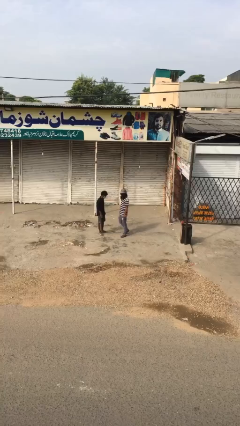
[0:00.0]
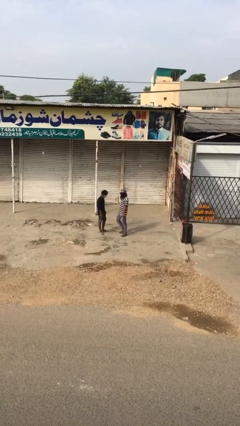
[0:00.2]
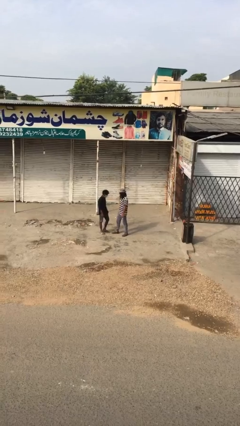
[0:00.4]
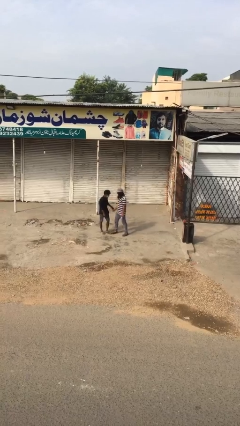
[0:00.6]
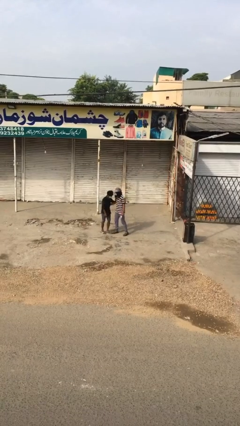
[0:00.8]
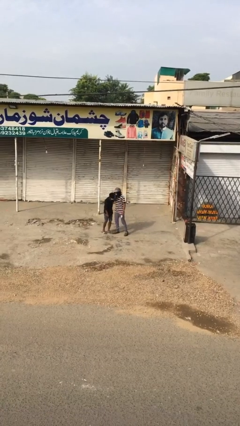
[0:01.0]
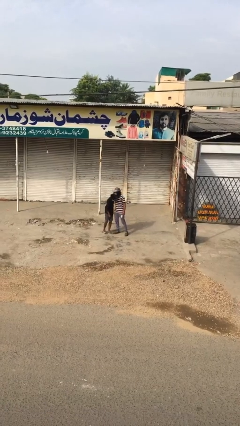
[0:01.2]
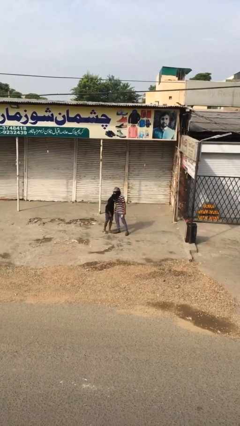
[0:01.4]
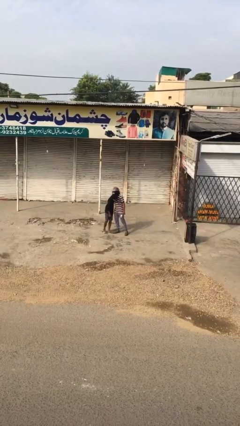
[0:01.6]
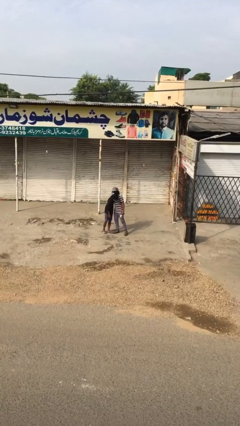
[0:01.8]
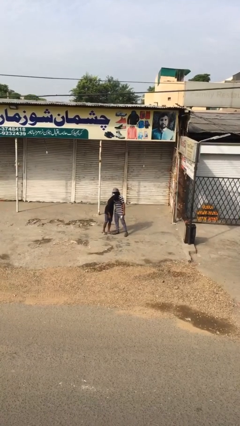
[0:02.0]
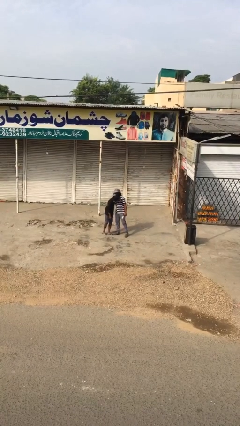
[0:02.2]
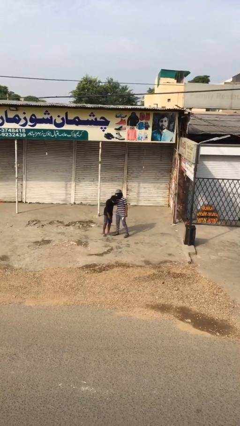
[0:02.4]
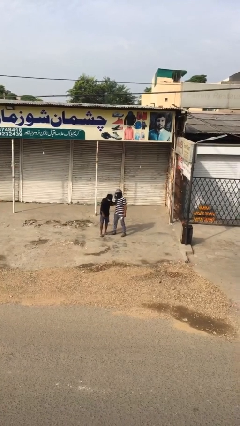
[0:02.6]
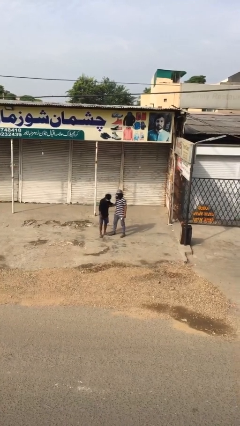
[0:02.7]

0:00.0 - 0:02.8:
person embraces person

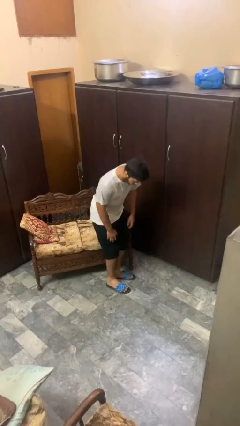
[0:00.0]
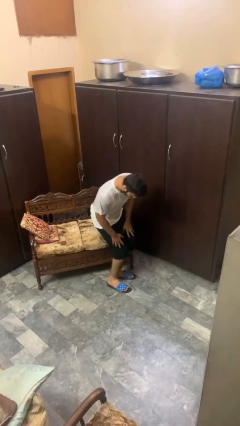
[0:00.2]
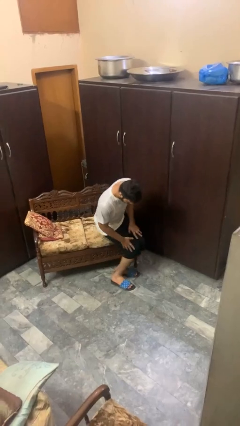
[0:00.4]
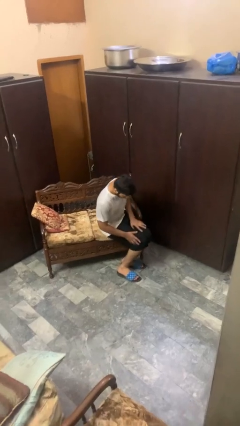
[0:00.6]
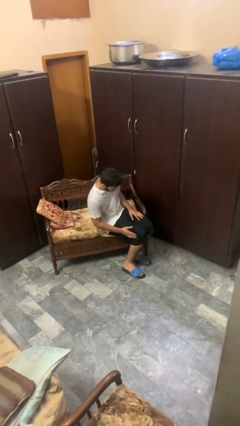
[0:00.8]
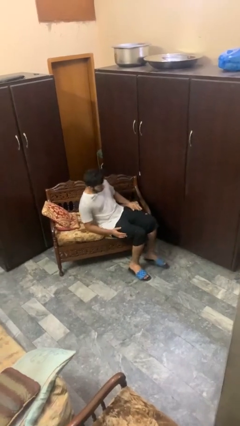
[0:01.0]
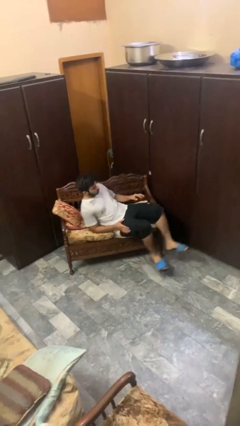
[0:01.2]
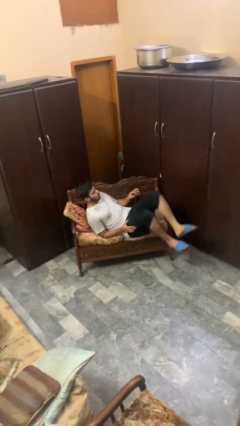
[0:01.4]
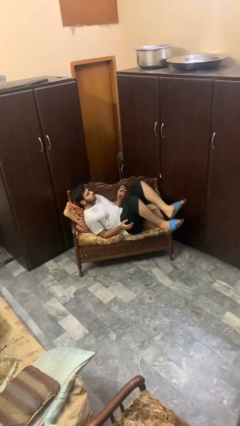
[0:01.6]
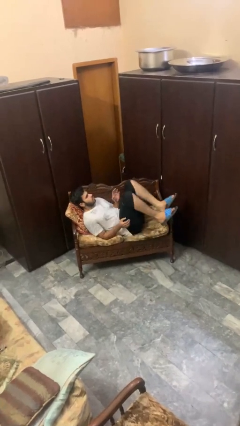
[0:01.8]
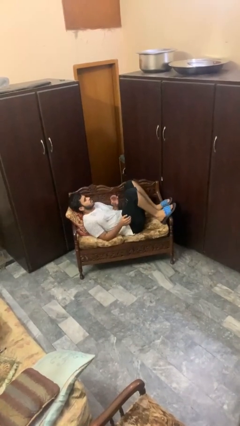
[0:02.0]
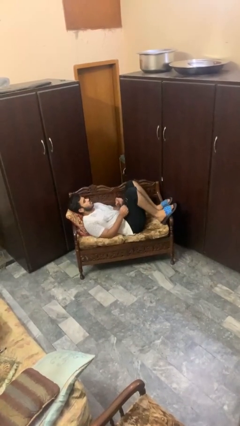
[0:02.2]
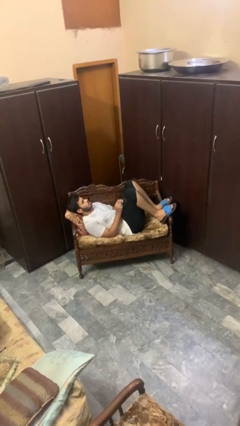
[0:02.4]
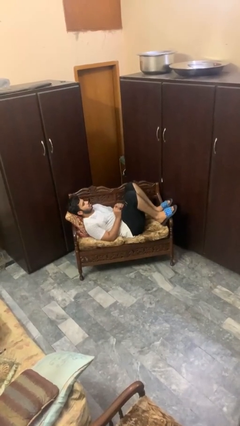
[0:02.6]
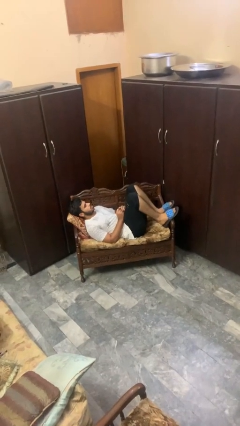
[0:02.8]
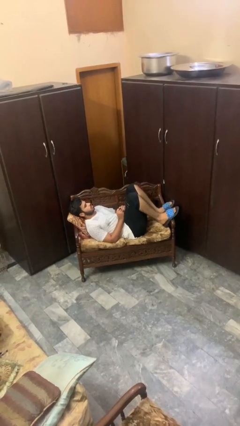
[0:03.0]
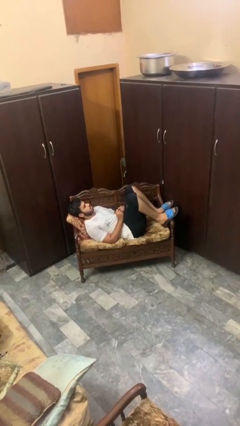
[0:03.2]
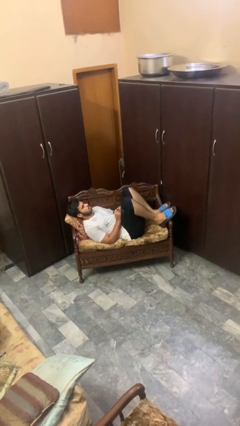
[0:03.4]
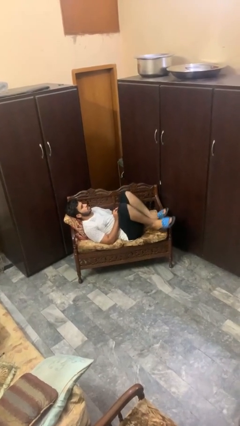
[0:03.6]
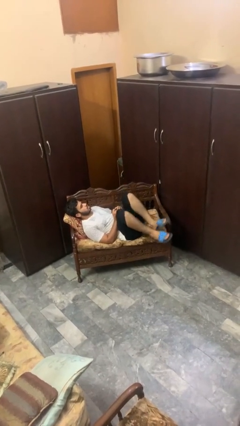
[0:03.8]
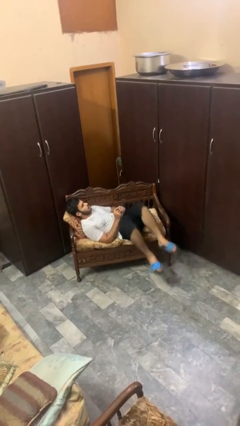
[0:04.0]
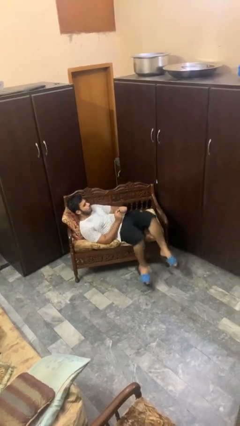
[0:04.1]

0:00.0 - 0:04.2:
person lies down on couch

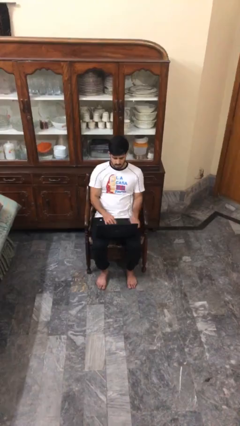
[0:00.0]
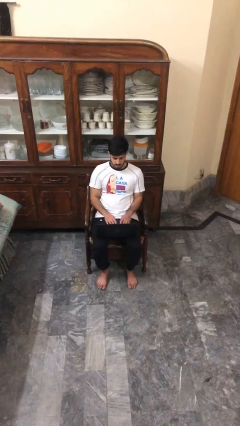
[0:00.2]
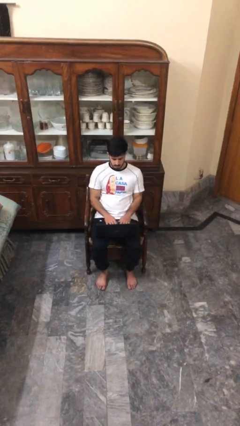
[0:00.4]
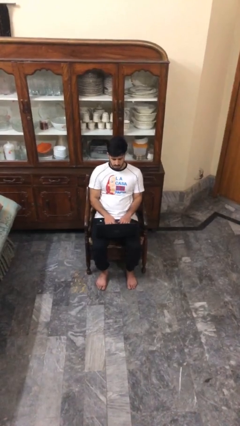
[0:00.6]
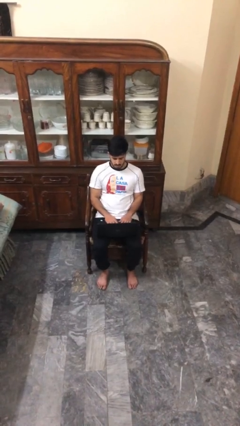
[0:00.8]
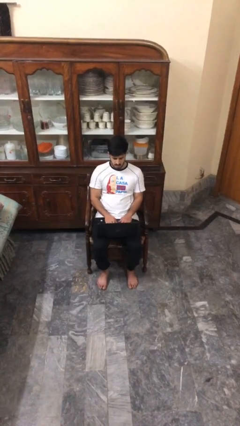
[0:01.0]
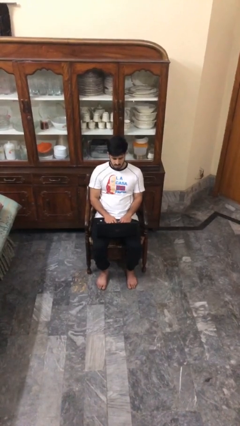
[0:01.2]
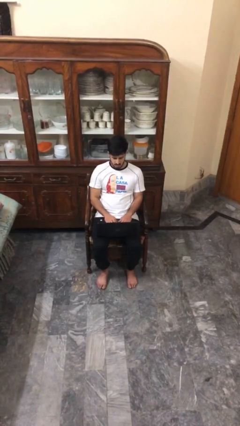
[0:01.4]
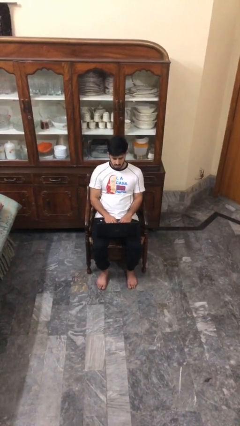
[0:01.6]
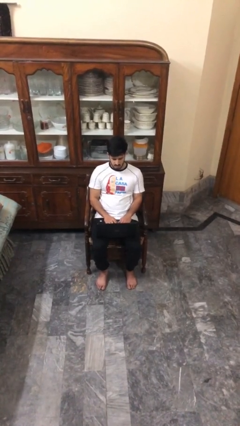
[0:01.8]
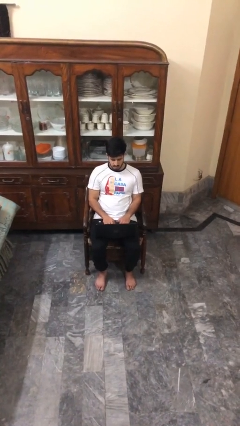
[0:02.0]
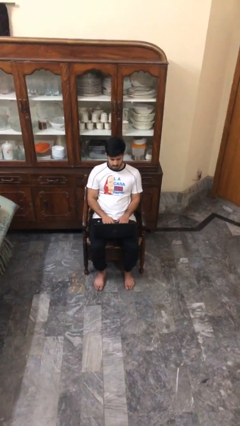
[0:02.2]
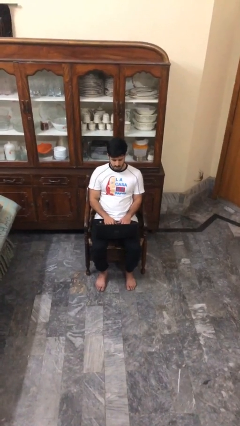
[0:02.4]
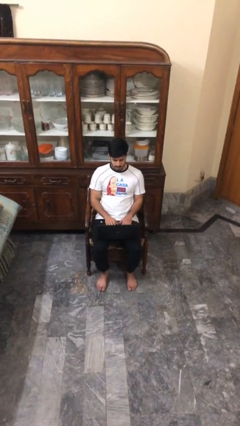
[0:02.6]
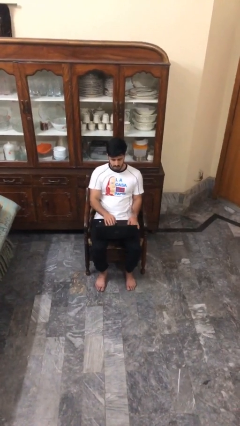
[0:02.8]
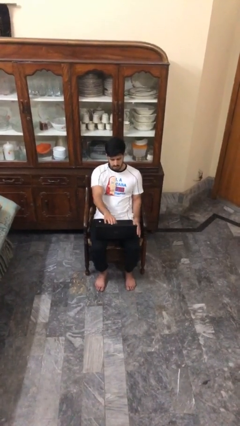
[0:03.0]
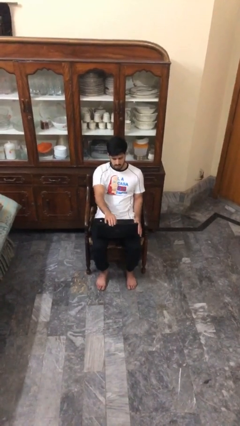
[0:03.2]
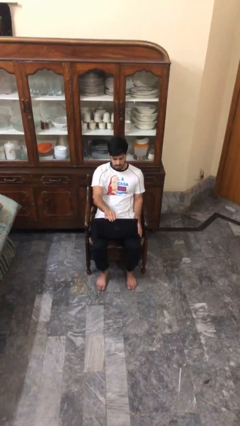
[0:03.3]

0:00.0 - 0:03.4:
person interacts with laptop

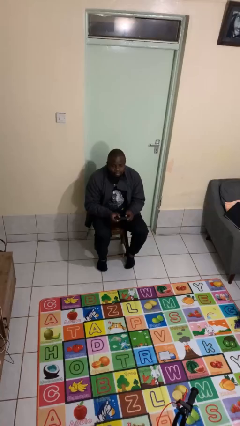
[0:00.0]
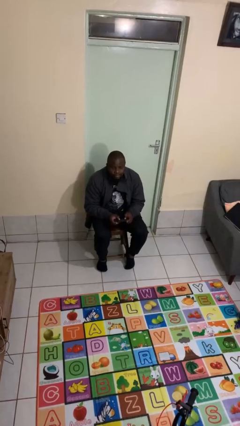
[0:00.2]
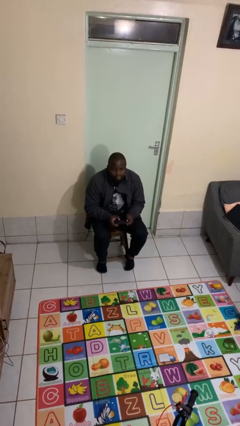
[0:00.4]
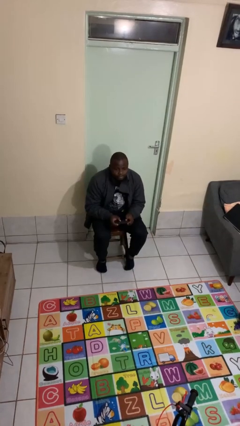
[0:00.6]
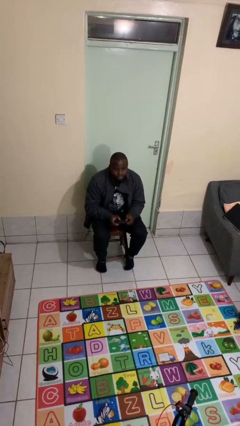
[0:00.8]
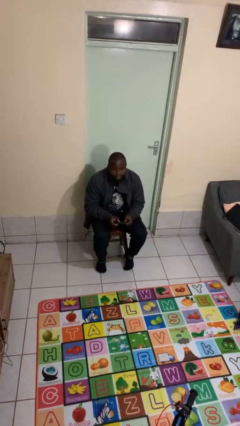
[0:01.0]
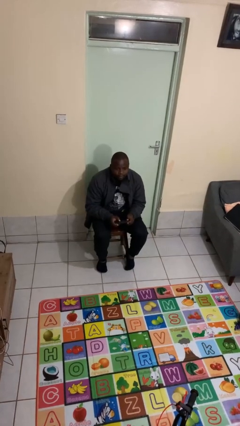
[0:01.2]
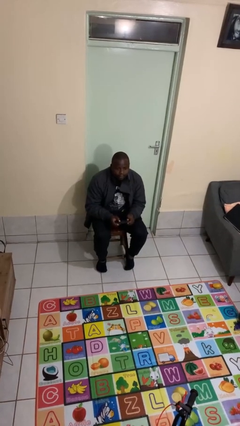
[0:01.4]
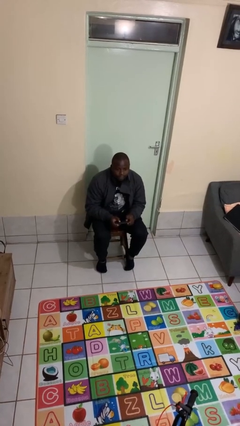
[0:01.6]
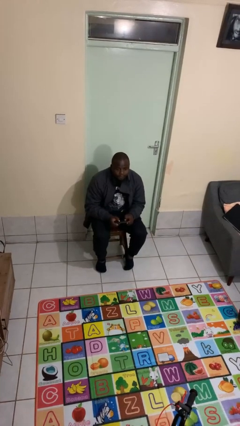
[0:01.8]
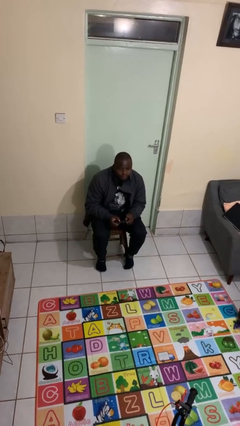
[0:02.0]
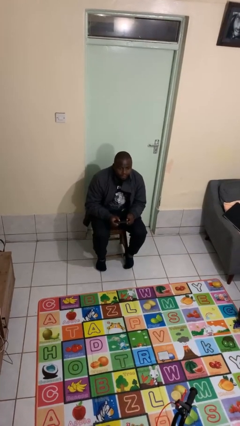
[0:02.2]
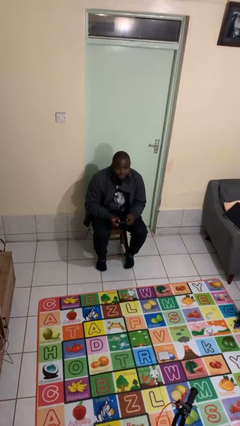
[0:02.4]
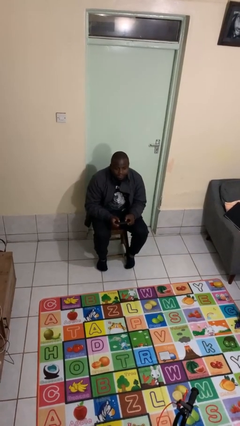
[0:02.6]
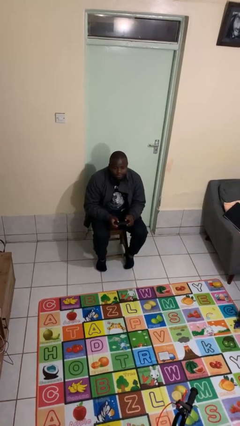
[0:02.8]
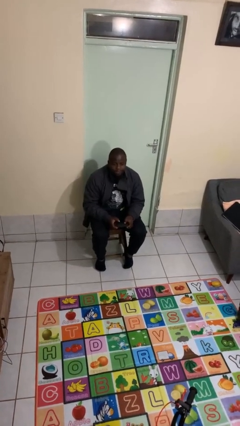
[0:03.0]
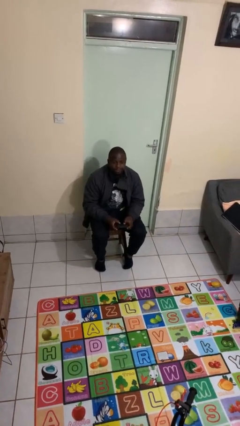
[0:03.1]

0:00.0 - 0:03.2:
person interacts with handheld game

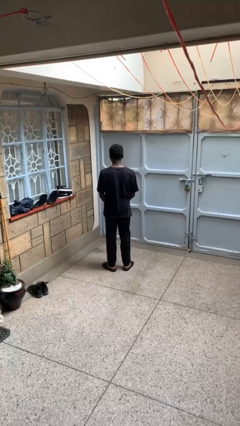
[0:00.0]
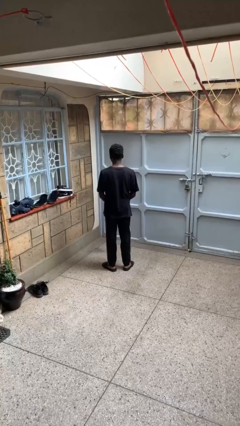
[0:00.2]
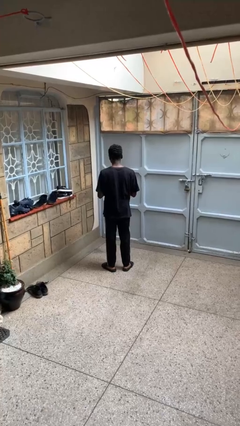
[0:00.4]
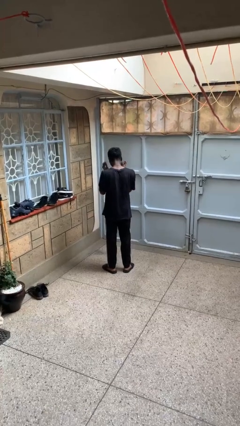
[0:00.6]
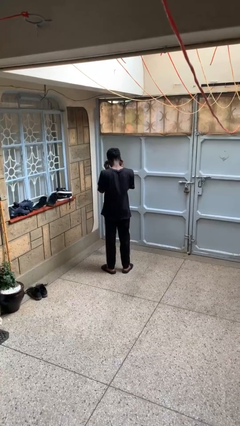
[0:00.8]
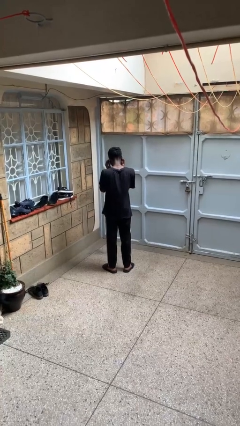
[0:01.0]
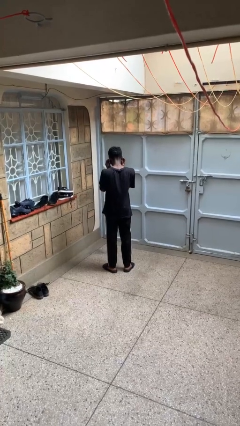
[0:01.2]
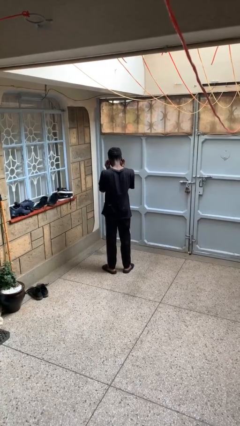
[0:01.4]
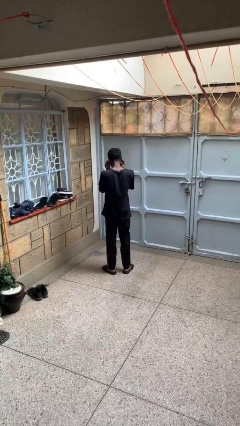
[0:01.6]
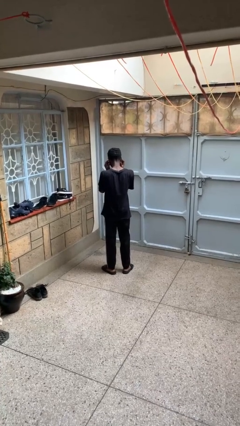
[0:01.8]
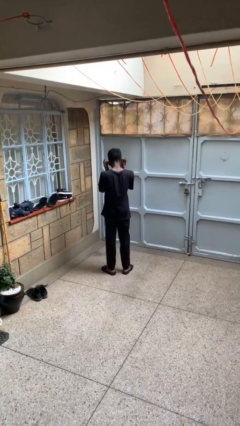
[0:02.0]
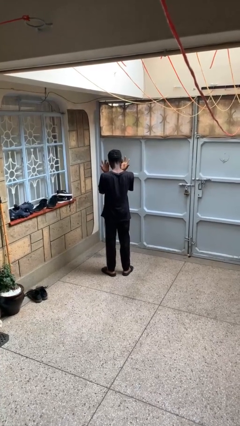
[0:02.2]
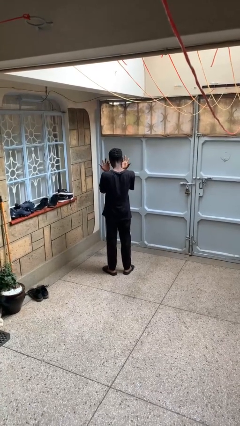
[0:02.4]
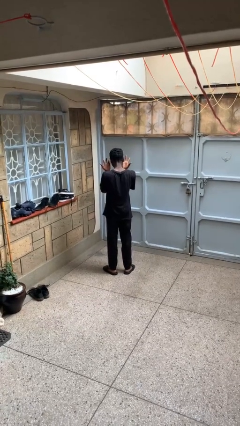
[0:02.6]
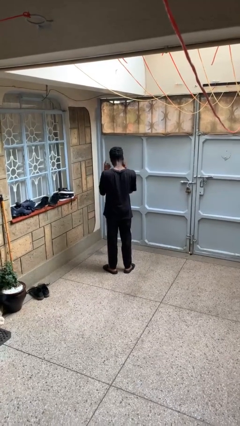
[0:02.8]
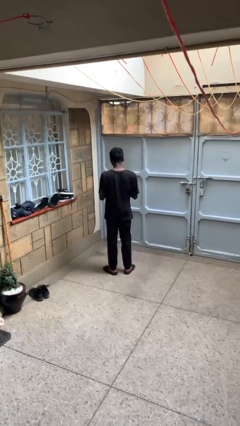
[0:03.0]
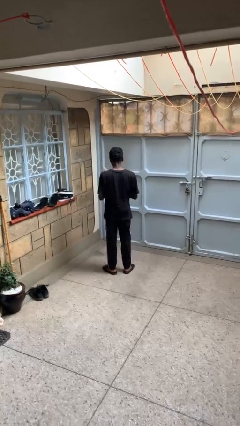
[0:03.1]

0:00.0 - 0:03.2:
person puts fingers in ear

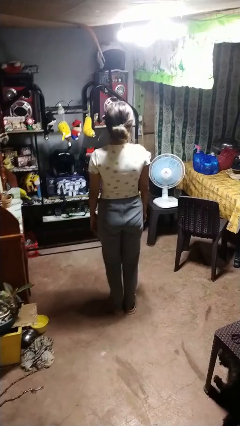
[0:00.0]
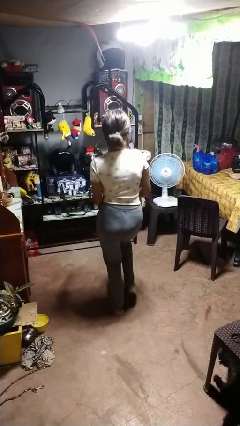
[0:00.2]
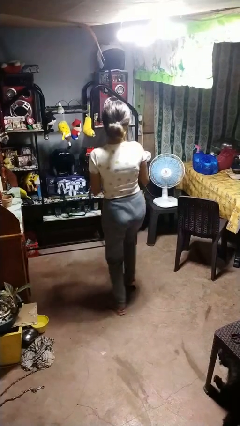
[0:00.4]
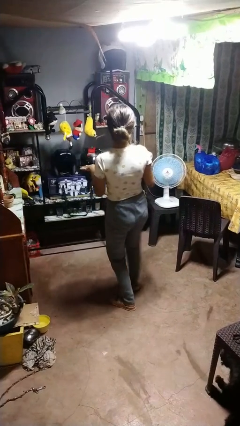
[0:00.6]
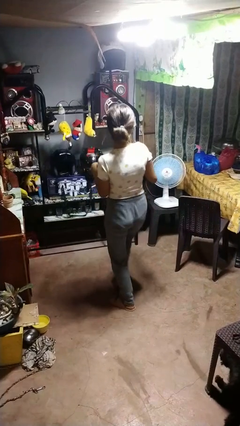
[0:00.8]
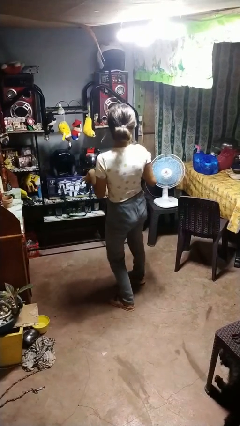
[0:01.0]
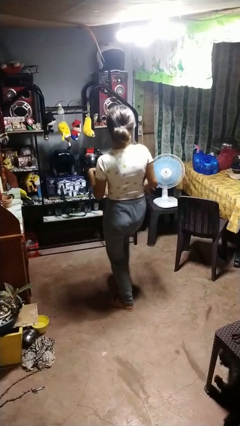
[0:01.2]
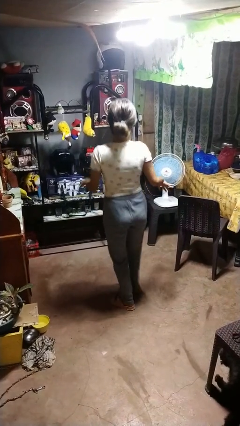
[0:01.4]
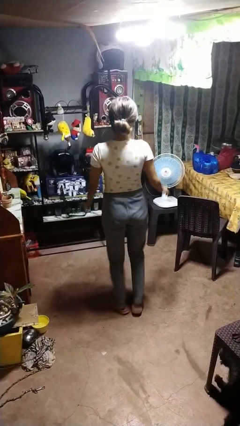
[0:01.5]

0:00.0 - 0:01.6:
person dances in place
